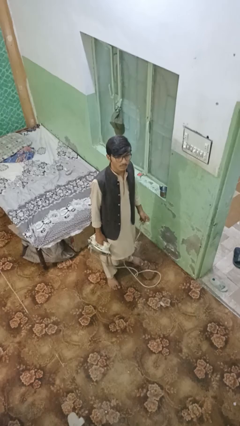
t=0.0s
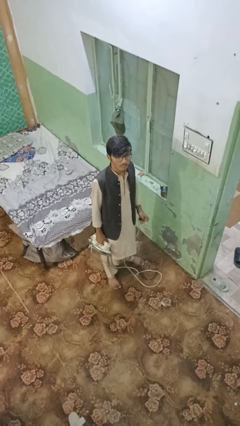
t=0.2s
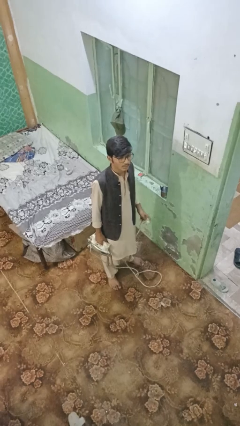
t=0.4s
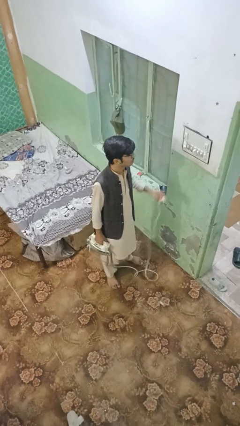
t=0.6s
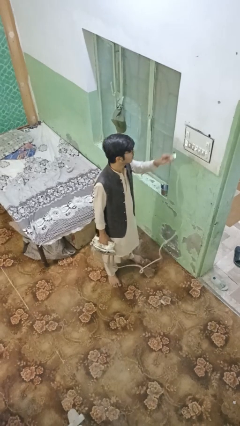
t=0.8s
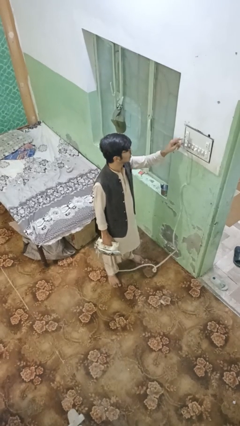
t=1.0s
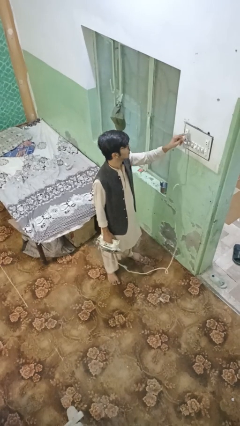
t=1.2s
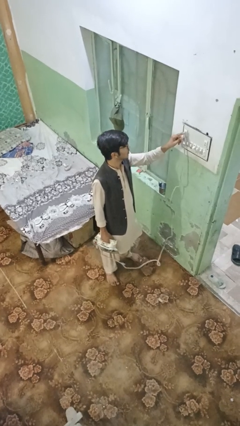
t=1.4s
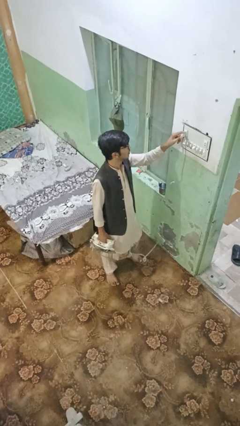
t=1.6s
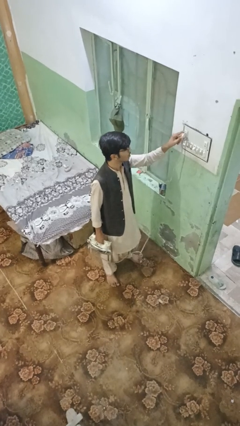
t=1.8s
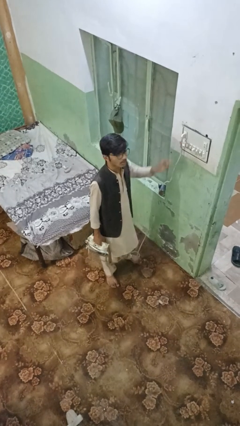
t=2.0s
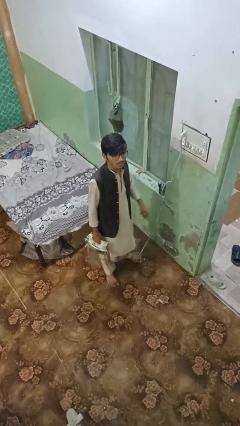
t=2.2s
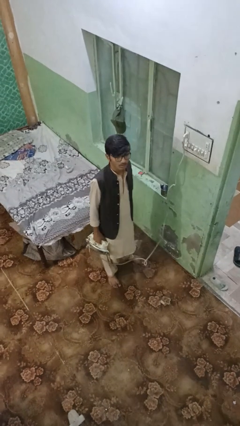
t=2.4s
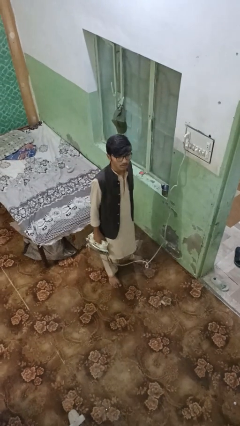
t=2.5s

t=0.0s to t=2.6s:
person plugs into electrical socket

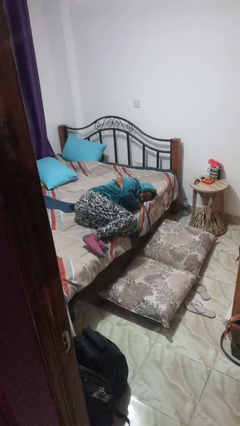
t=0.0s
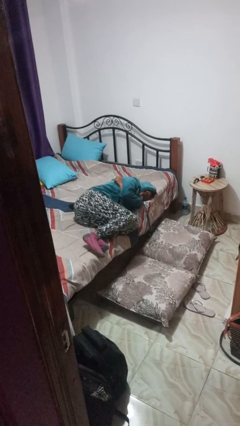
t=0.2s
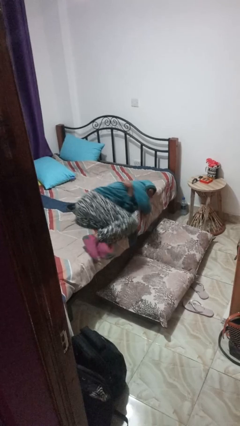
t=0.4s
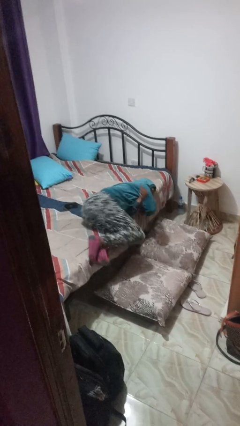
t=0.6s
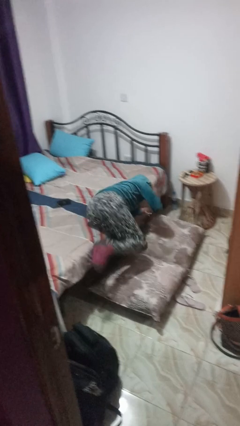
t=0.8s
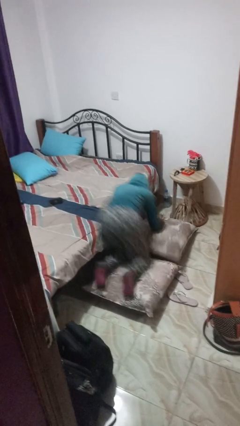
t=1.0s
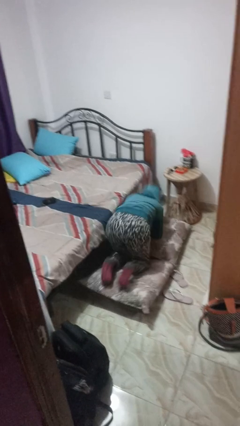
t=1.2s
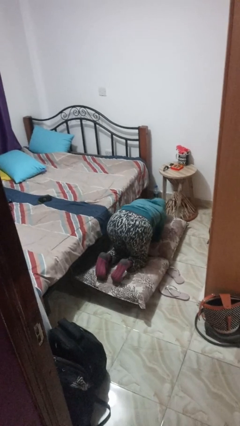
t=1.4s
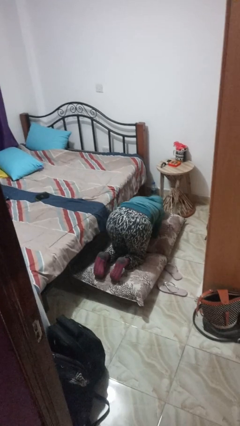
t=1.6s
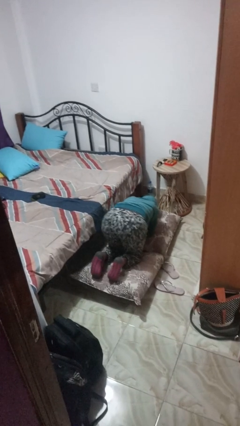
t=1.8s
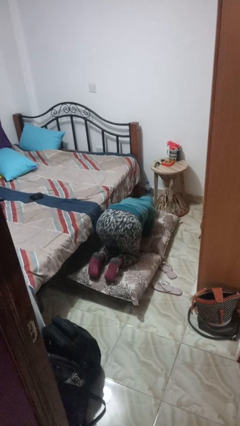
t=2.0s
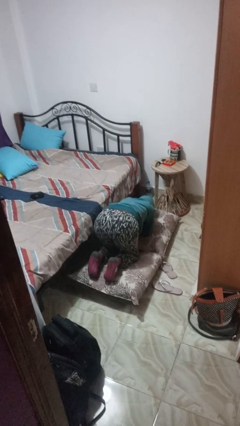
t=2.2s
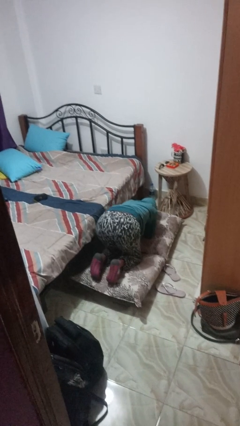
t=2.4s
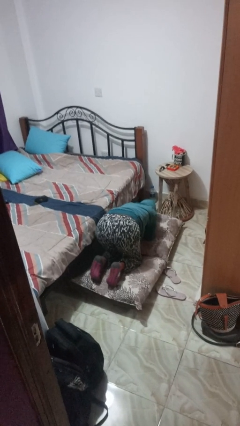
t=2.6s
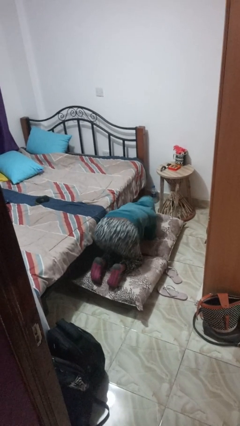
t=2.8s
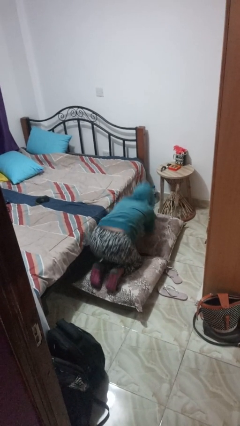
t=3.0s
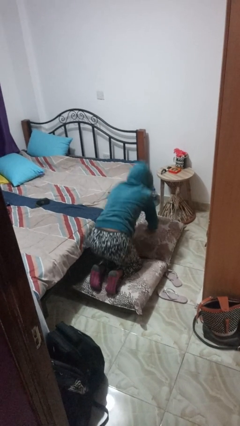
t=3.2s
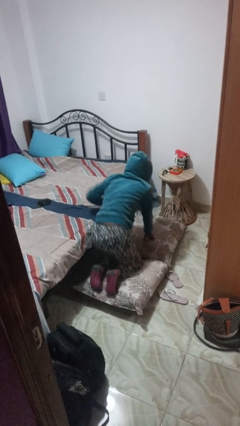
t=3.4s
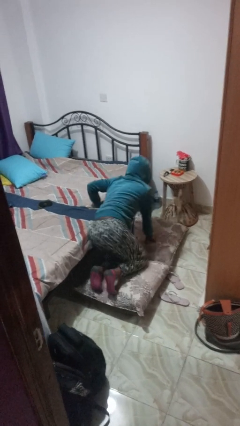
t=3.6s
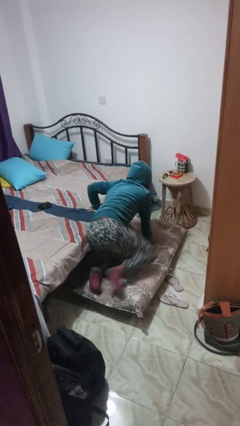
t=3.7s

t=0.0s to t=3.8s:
person falls from bed

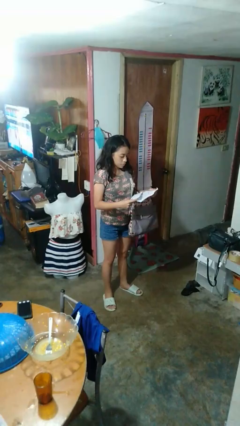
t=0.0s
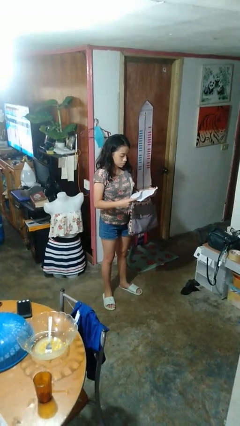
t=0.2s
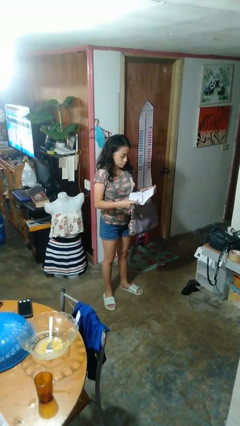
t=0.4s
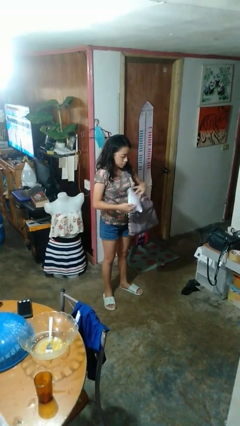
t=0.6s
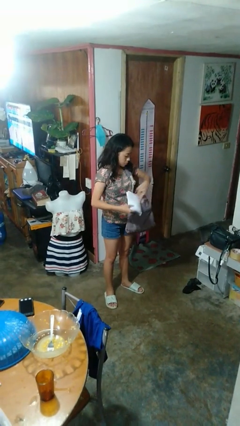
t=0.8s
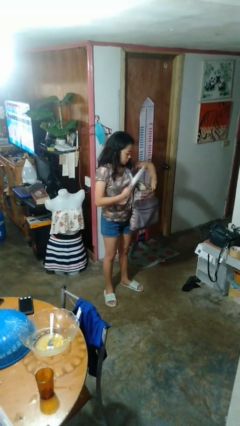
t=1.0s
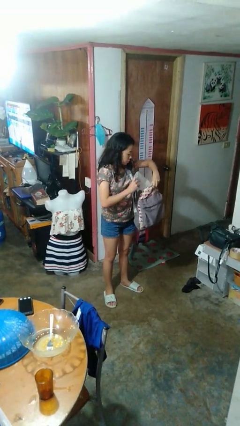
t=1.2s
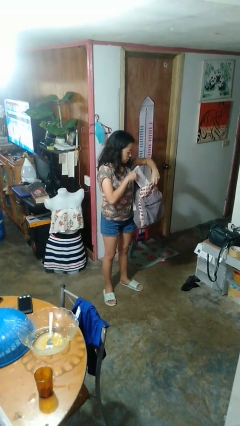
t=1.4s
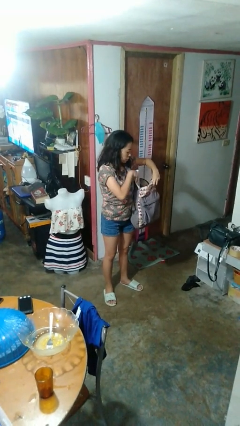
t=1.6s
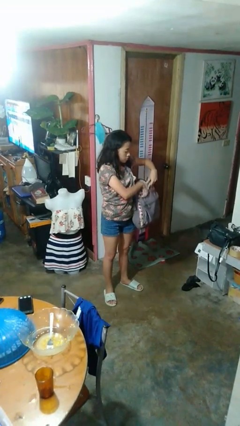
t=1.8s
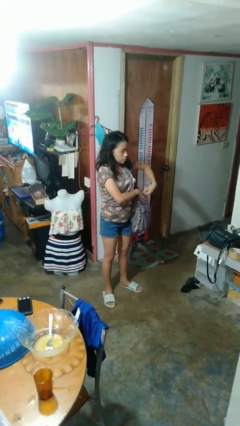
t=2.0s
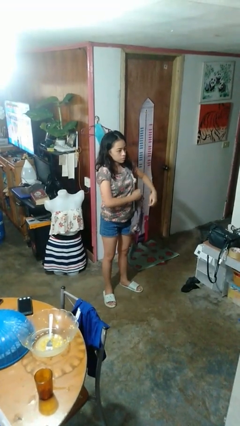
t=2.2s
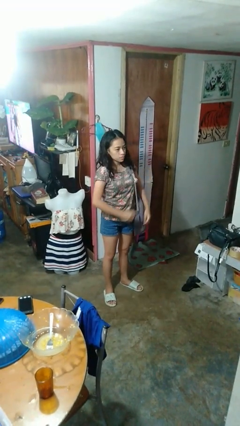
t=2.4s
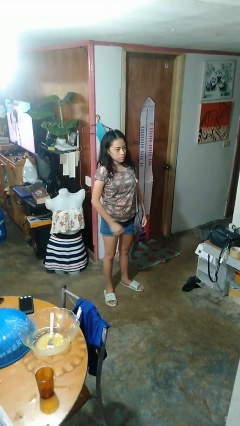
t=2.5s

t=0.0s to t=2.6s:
person puts object into backpack

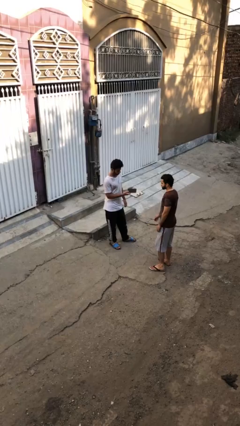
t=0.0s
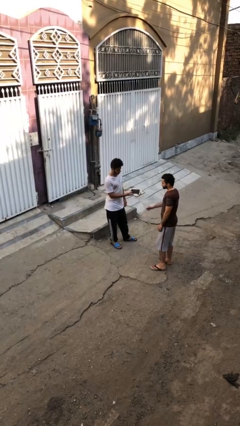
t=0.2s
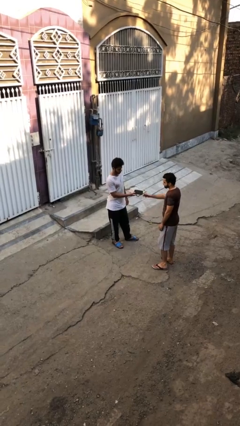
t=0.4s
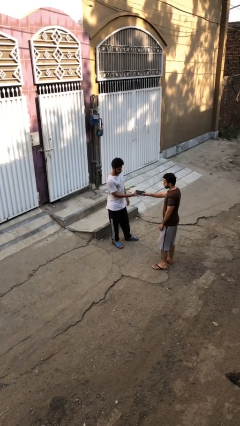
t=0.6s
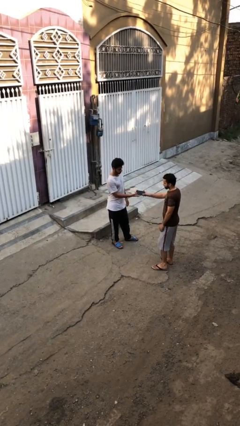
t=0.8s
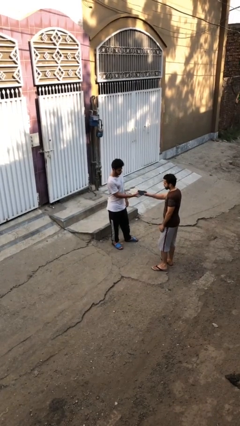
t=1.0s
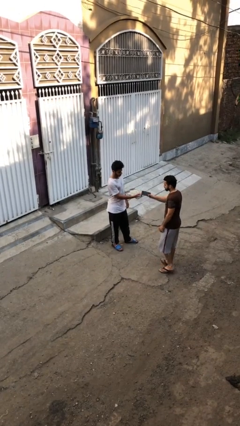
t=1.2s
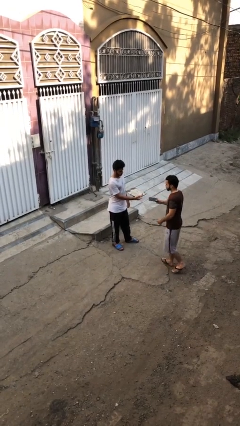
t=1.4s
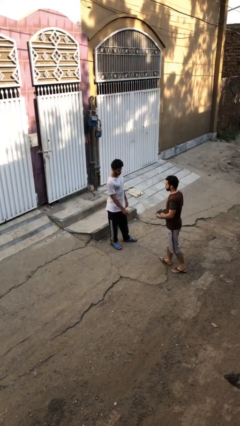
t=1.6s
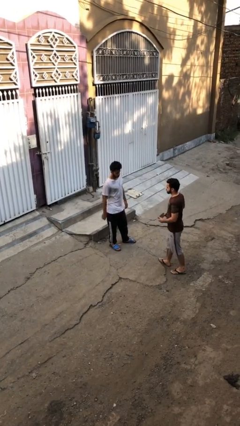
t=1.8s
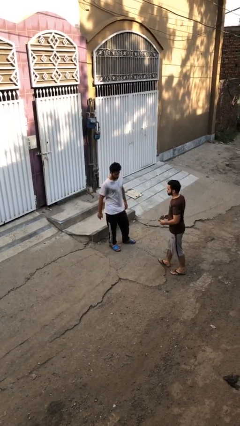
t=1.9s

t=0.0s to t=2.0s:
person transfers object to person

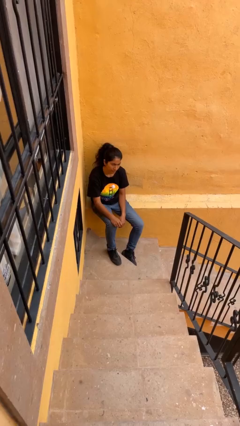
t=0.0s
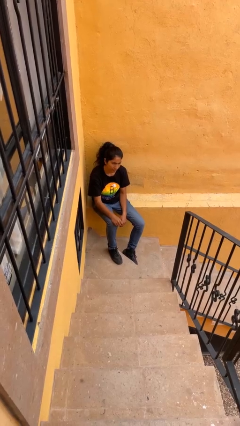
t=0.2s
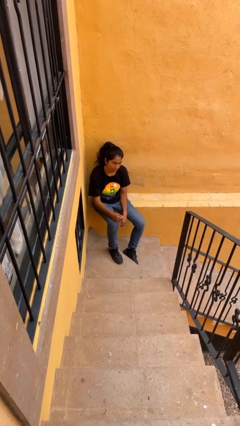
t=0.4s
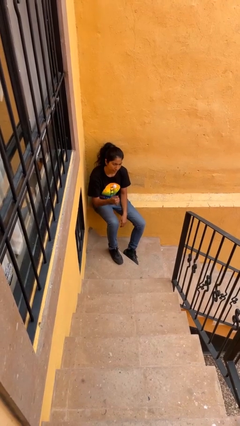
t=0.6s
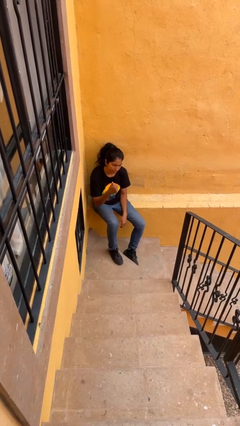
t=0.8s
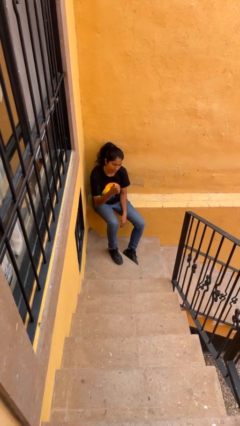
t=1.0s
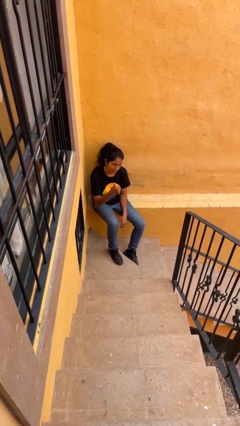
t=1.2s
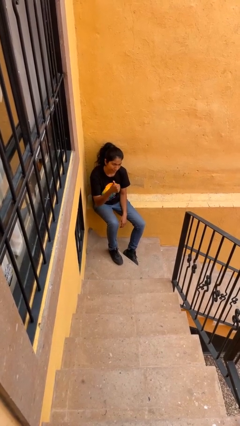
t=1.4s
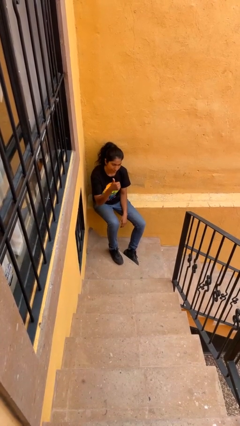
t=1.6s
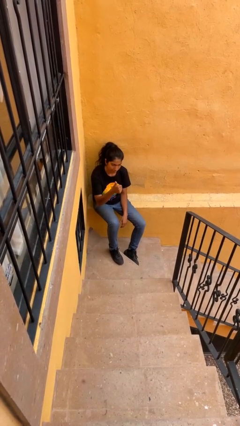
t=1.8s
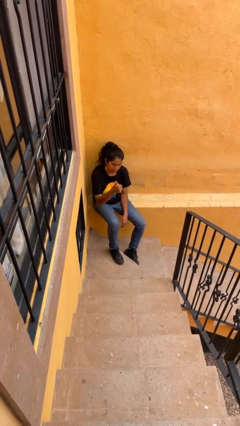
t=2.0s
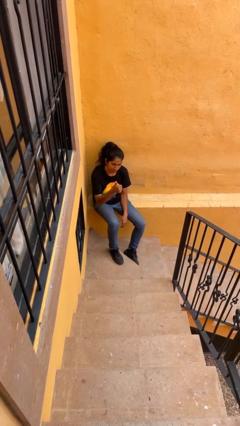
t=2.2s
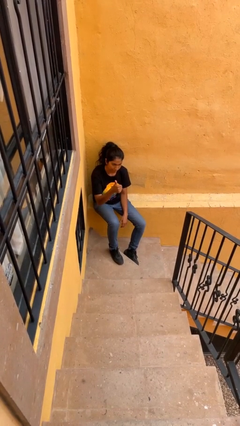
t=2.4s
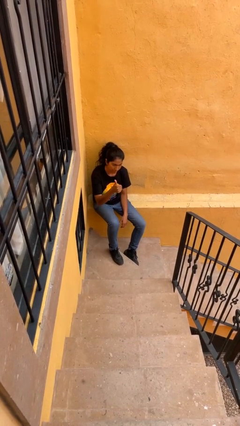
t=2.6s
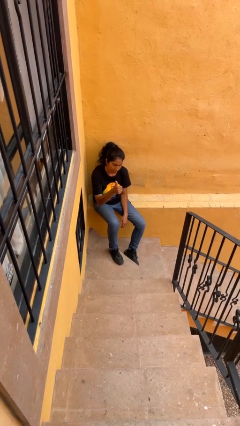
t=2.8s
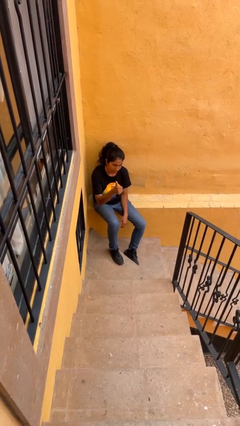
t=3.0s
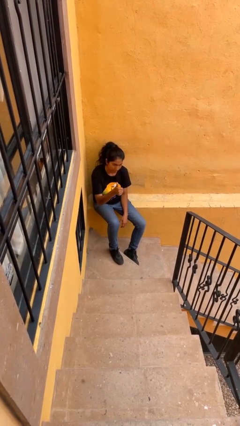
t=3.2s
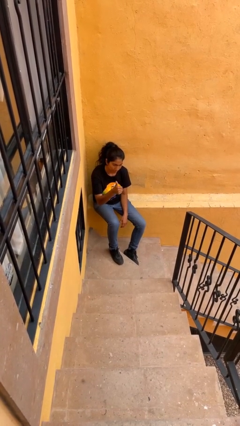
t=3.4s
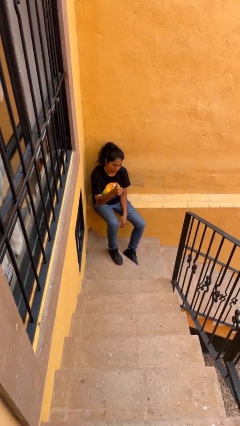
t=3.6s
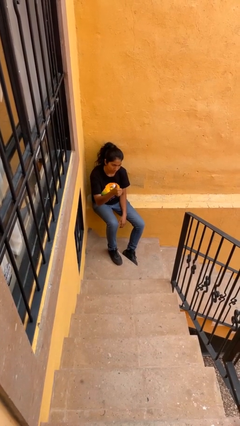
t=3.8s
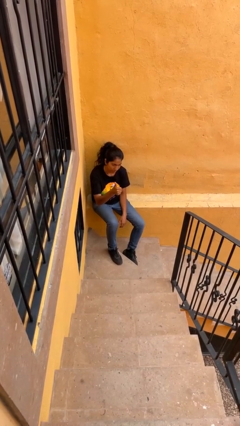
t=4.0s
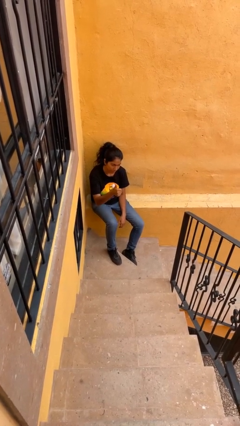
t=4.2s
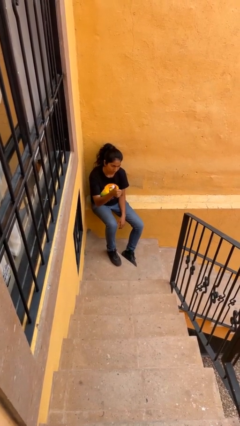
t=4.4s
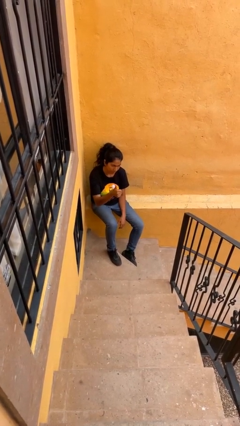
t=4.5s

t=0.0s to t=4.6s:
person gestures thumbs up

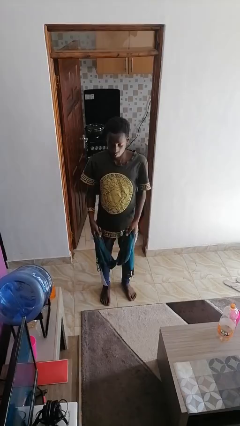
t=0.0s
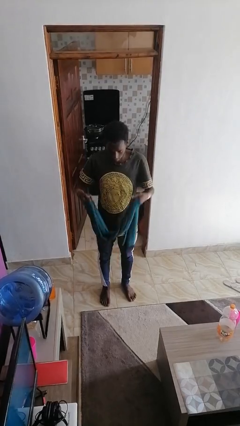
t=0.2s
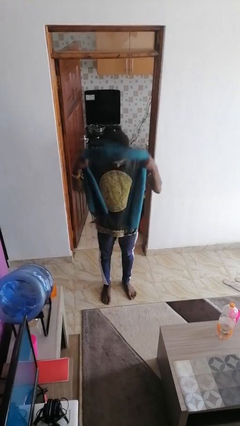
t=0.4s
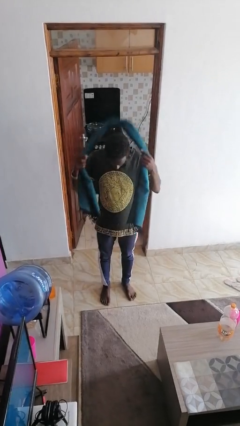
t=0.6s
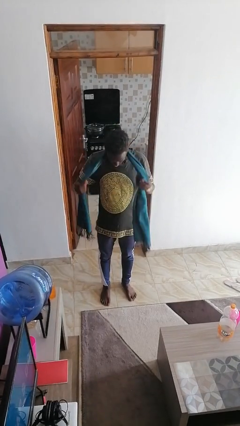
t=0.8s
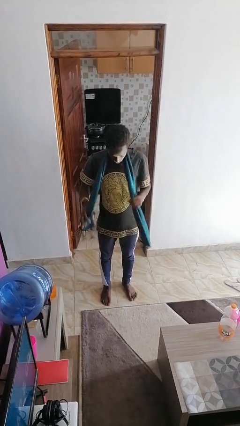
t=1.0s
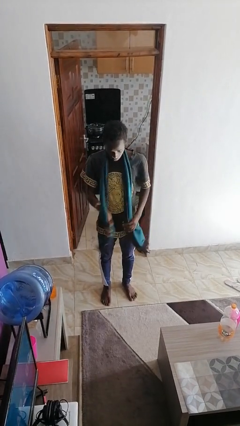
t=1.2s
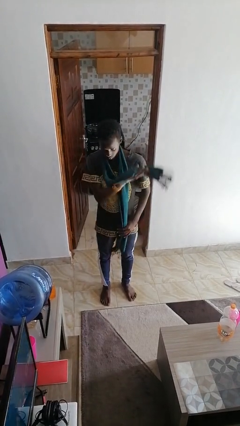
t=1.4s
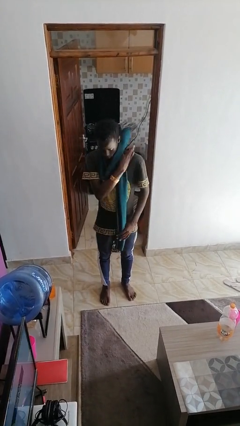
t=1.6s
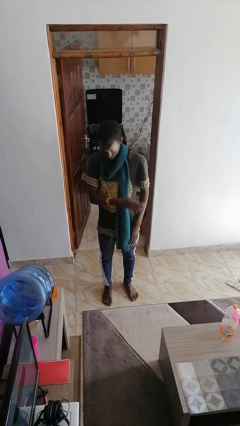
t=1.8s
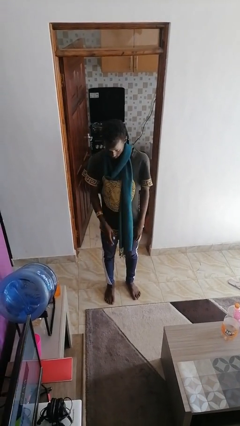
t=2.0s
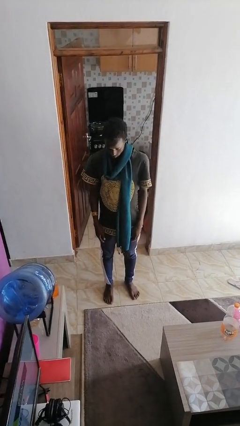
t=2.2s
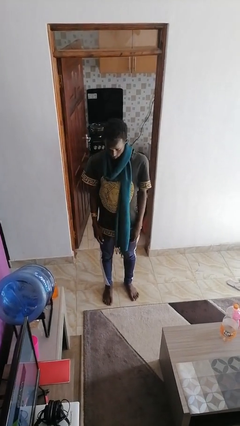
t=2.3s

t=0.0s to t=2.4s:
person puts on scarf
